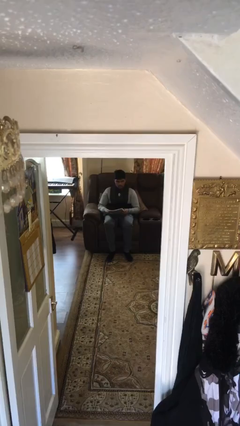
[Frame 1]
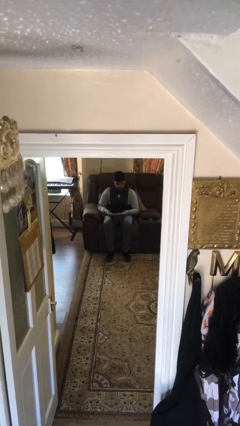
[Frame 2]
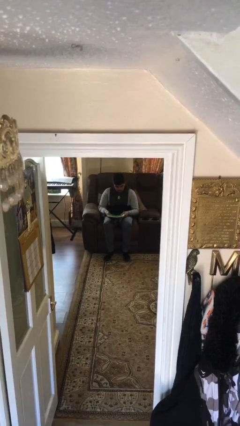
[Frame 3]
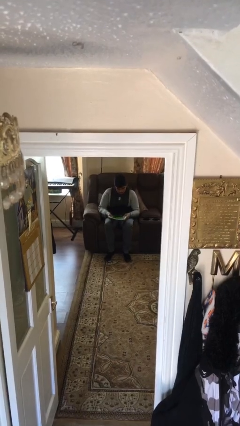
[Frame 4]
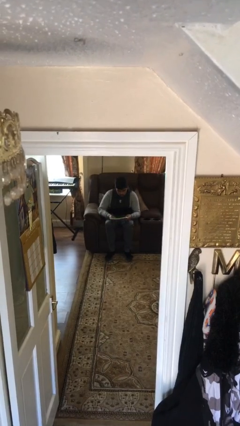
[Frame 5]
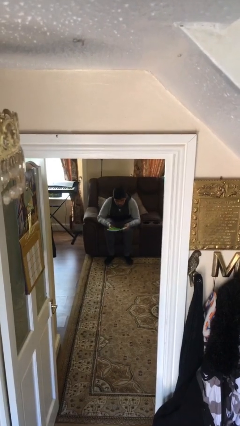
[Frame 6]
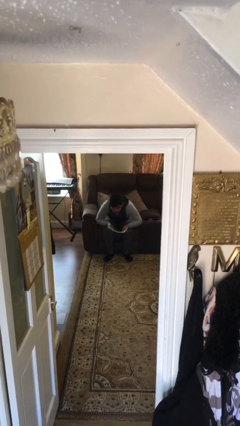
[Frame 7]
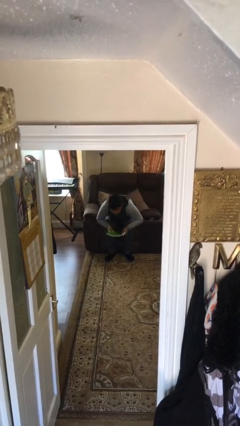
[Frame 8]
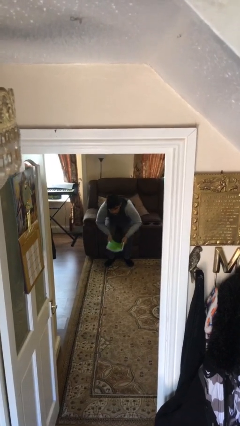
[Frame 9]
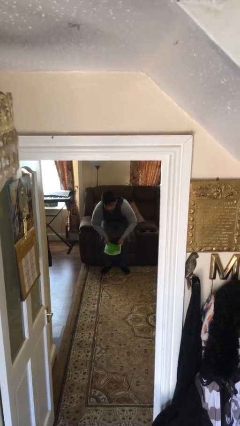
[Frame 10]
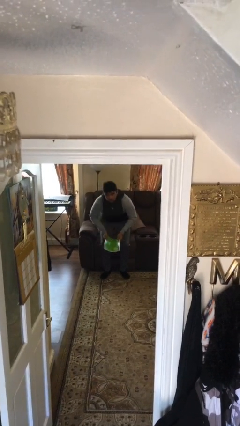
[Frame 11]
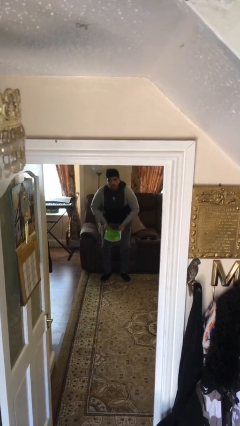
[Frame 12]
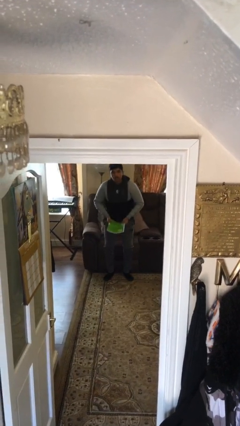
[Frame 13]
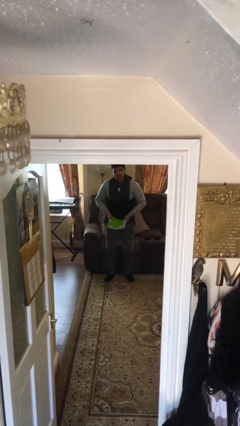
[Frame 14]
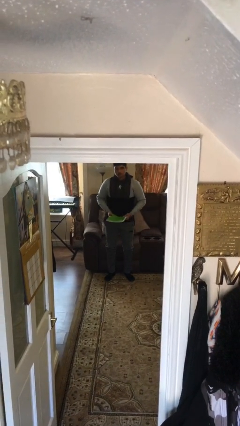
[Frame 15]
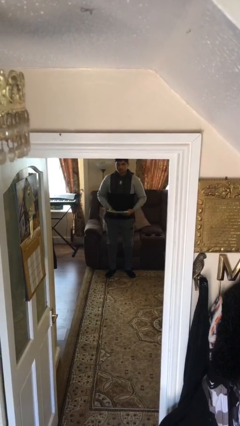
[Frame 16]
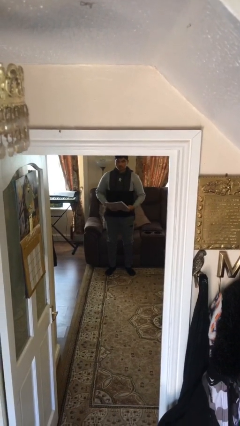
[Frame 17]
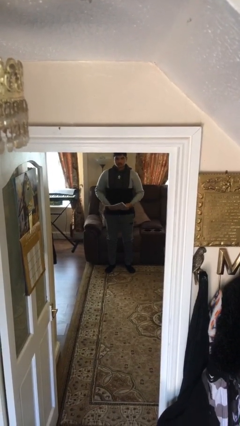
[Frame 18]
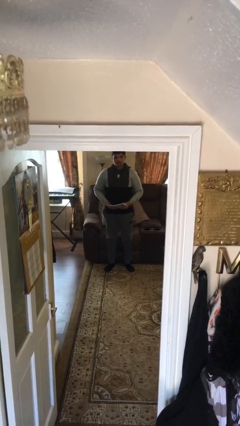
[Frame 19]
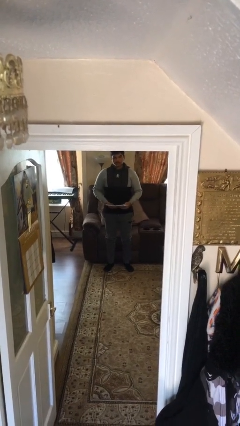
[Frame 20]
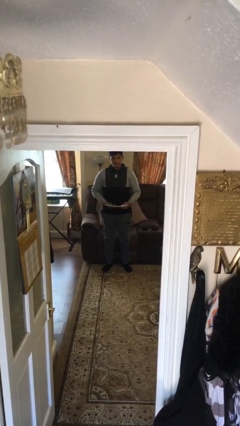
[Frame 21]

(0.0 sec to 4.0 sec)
person stands up

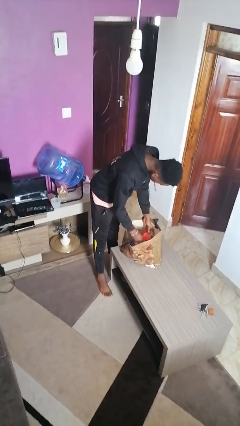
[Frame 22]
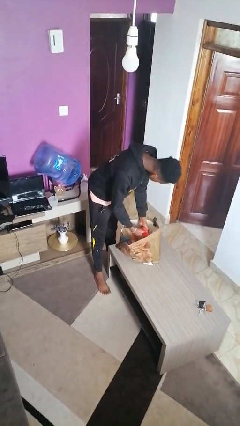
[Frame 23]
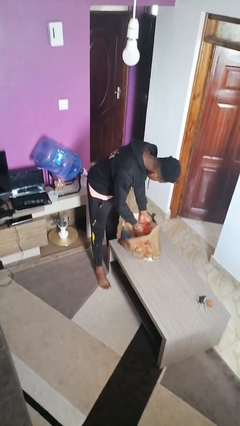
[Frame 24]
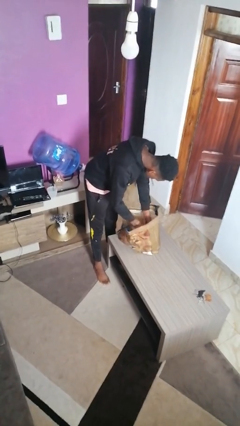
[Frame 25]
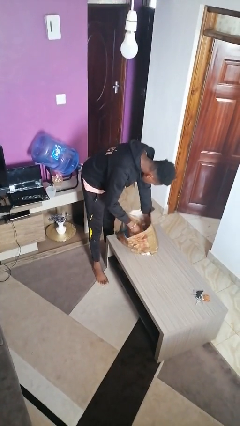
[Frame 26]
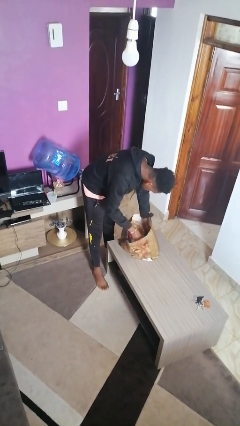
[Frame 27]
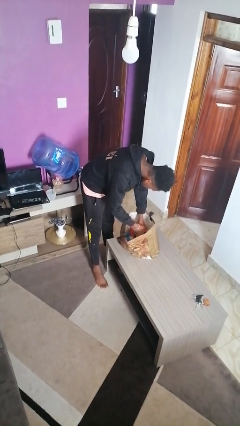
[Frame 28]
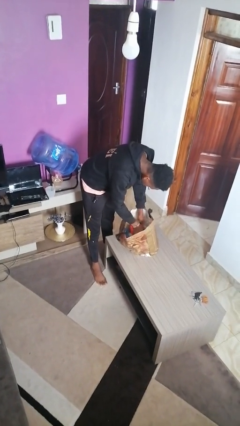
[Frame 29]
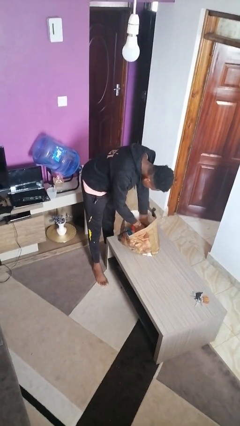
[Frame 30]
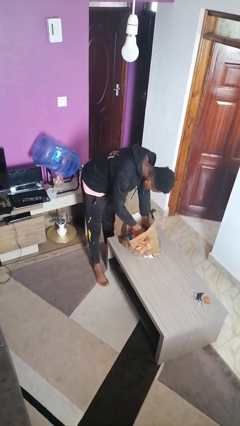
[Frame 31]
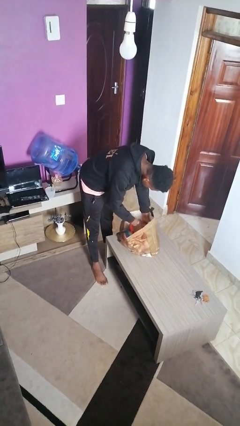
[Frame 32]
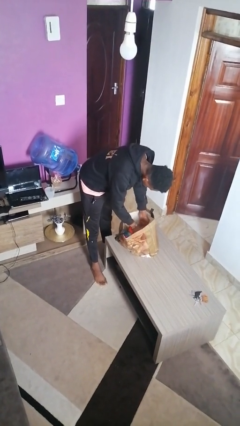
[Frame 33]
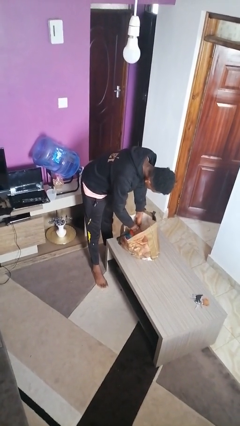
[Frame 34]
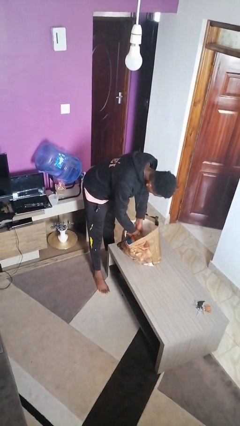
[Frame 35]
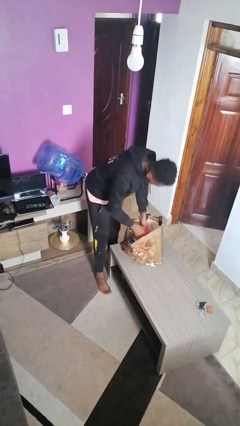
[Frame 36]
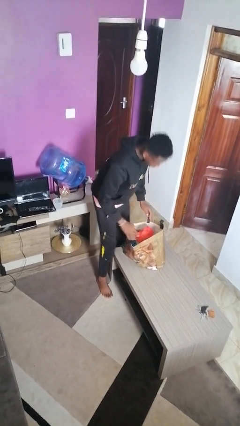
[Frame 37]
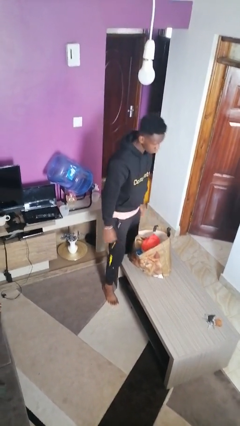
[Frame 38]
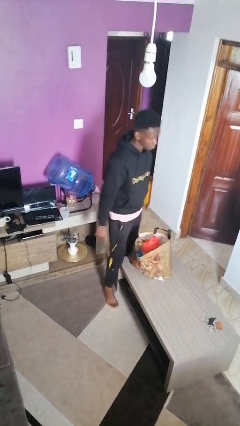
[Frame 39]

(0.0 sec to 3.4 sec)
person searches in bag

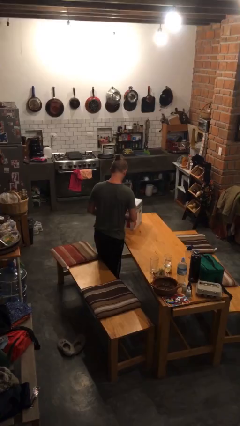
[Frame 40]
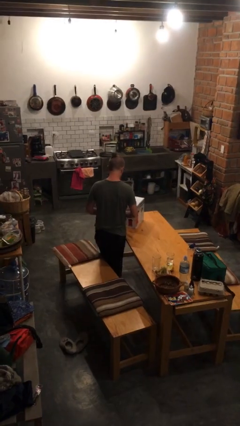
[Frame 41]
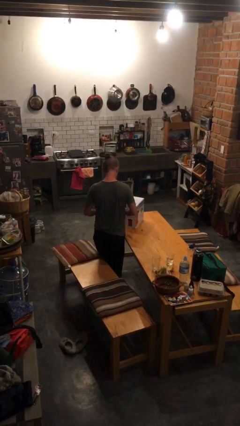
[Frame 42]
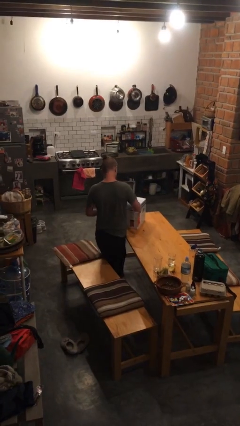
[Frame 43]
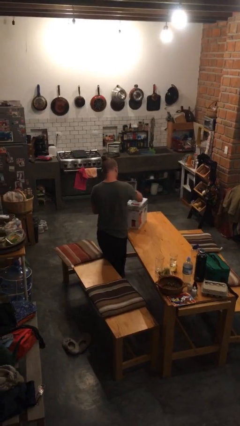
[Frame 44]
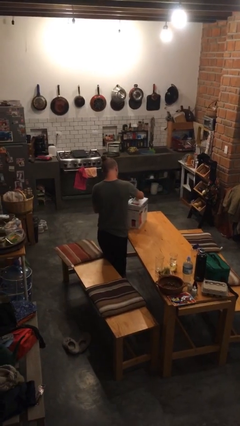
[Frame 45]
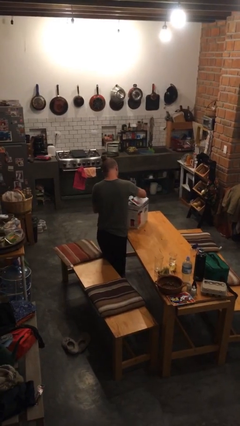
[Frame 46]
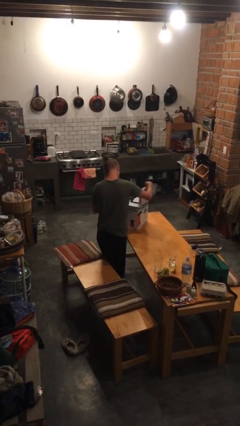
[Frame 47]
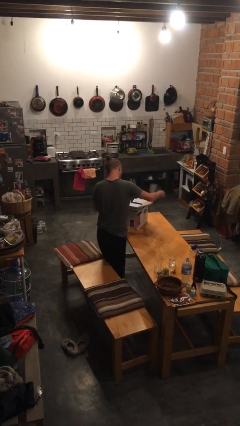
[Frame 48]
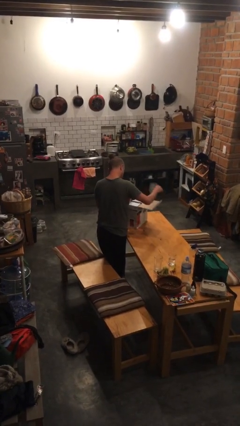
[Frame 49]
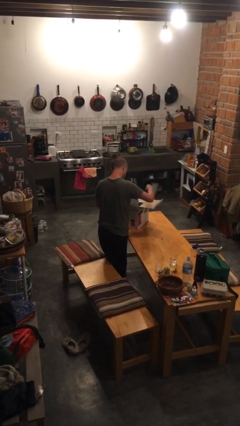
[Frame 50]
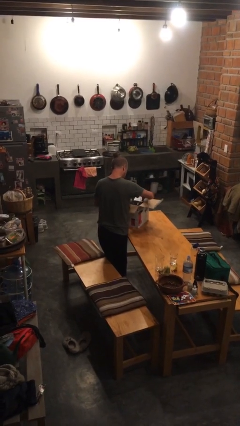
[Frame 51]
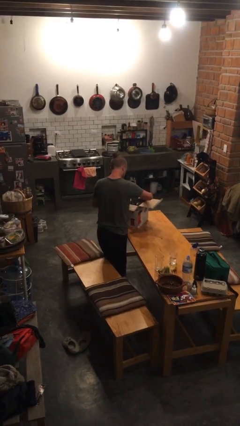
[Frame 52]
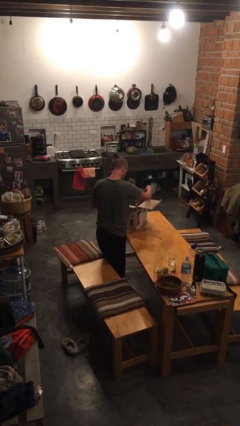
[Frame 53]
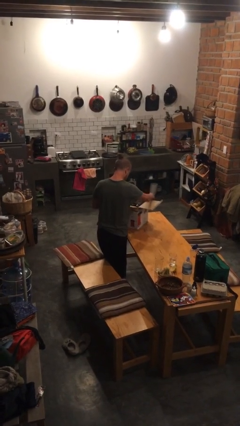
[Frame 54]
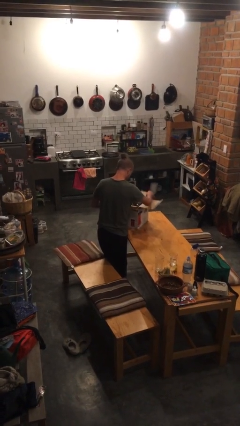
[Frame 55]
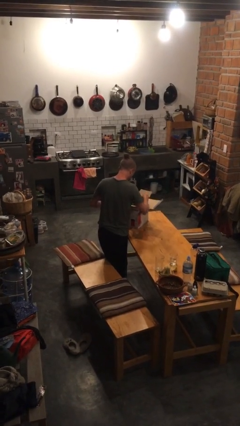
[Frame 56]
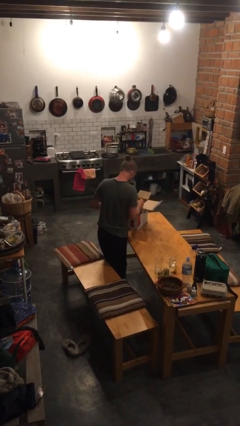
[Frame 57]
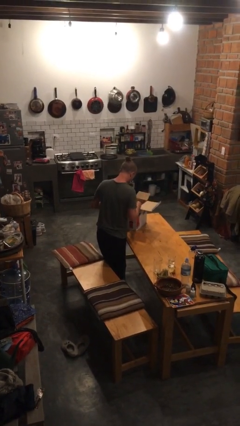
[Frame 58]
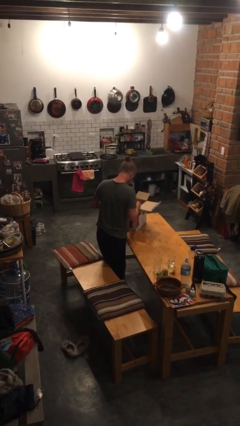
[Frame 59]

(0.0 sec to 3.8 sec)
person opens box

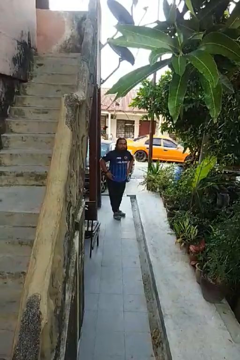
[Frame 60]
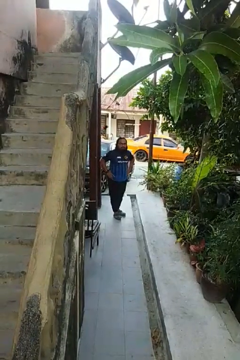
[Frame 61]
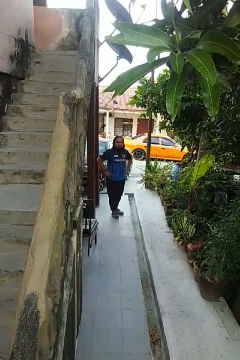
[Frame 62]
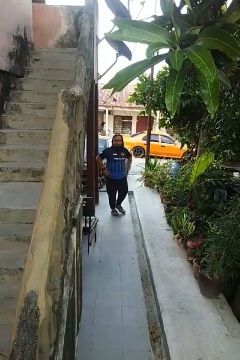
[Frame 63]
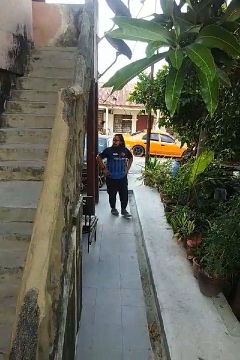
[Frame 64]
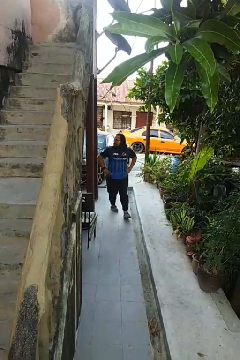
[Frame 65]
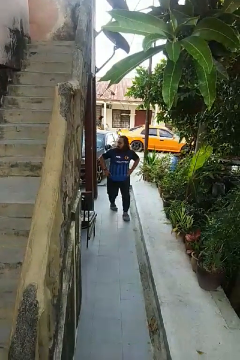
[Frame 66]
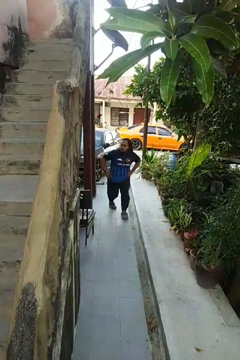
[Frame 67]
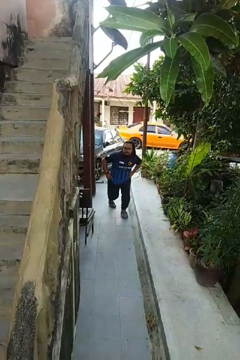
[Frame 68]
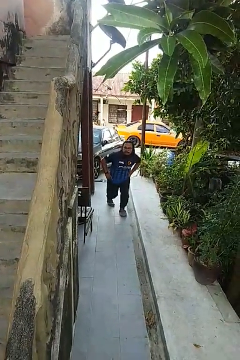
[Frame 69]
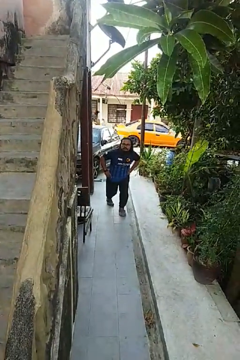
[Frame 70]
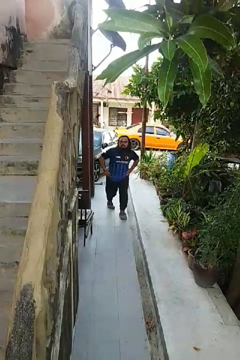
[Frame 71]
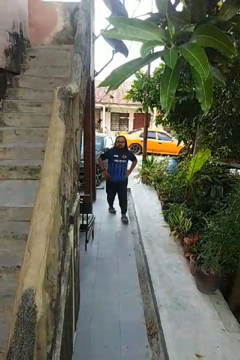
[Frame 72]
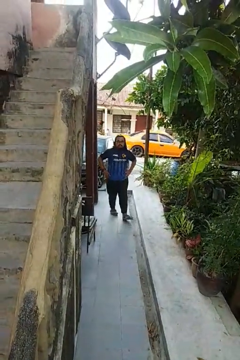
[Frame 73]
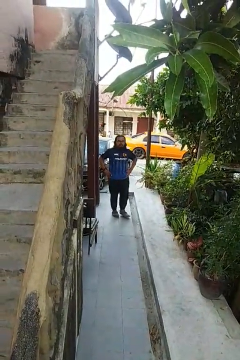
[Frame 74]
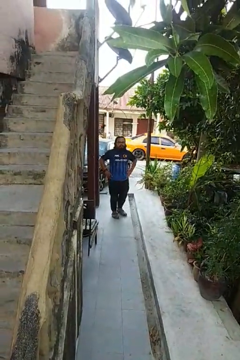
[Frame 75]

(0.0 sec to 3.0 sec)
person exercises with lunges

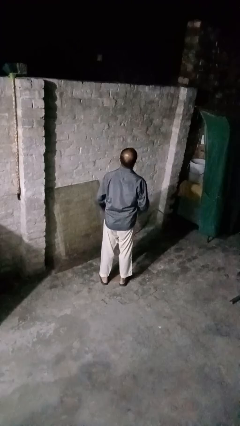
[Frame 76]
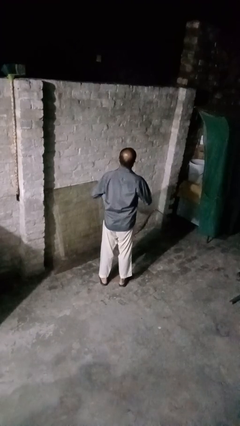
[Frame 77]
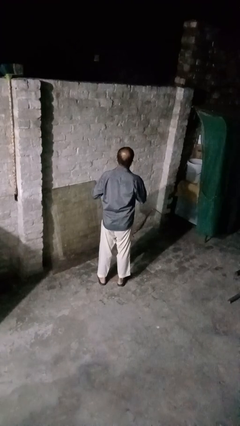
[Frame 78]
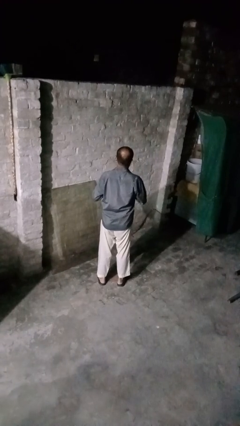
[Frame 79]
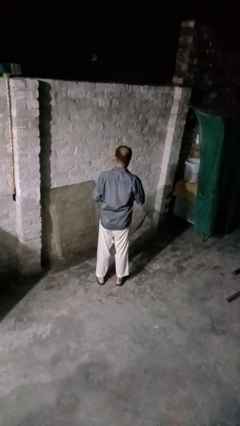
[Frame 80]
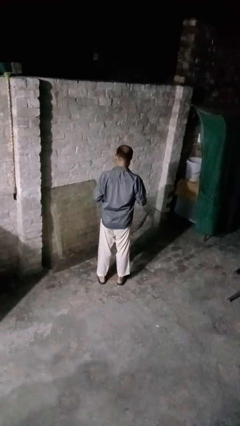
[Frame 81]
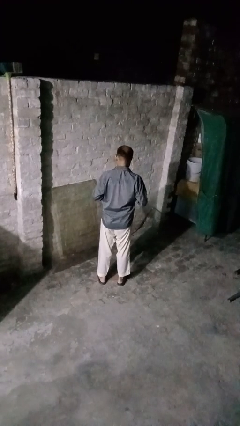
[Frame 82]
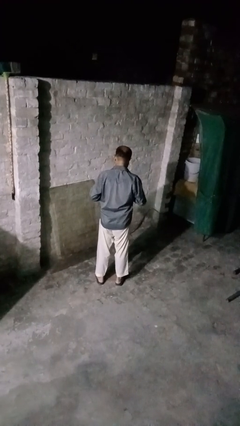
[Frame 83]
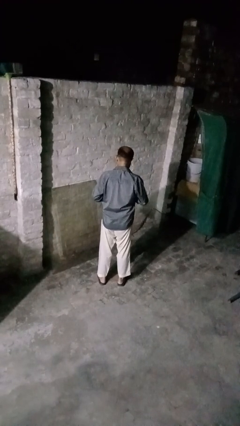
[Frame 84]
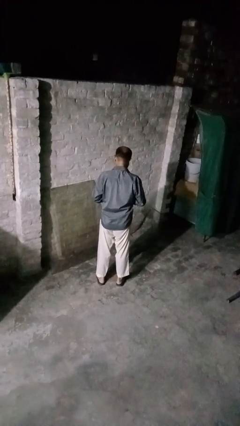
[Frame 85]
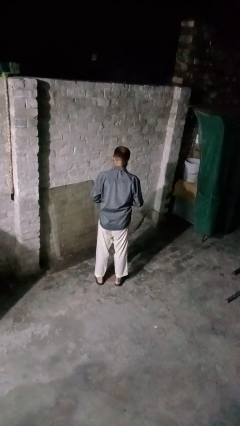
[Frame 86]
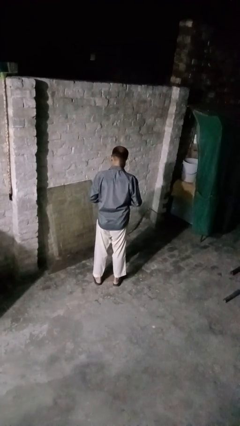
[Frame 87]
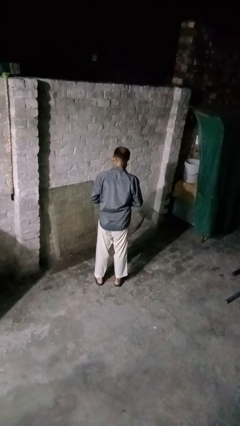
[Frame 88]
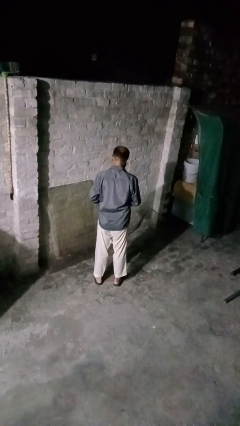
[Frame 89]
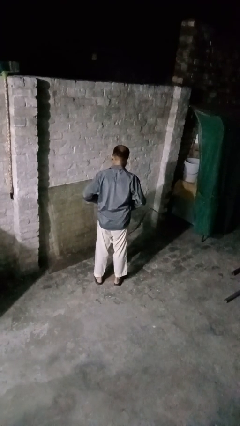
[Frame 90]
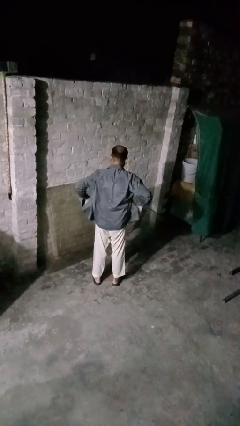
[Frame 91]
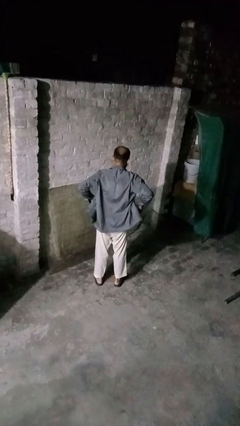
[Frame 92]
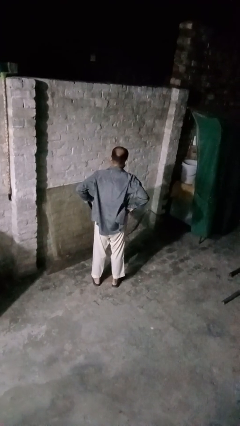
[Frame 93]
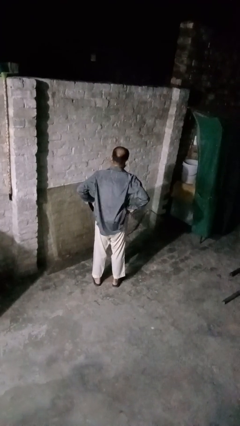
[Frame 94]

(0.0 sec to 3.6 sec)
person unbuttons shirt

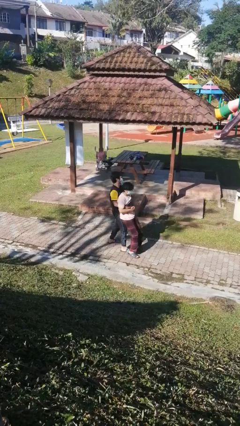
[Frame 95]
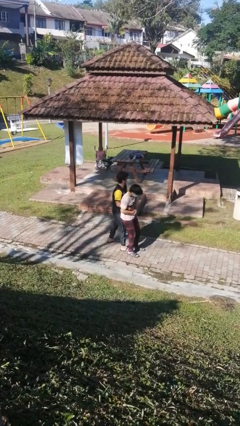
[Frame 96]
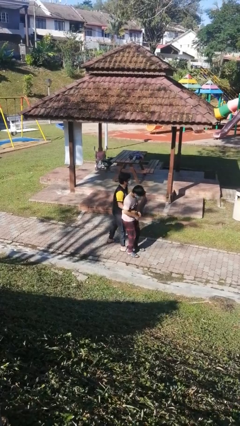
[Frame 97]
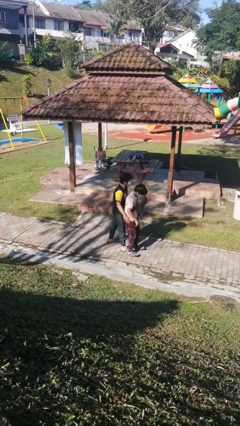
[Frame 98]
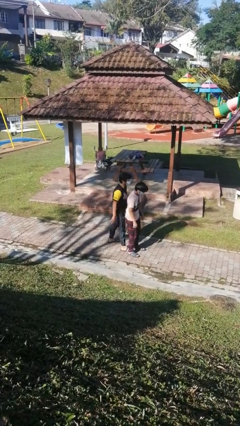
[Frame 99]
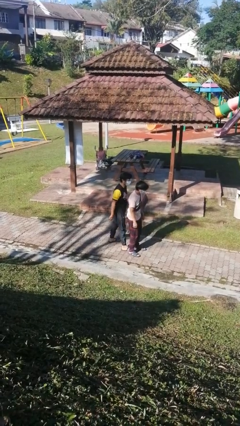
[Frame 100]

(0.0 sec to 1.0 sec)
person puts down person
